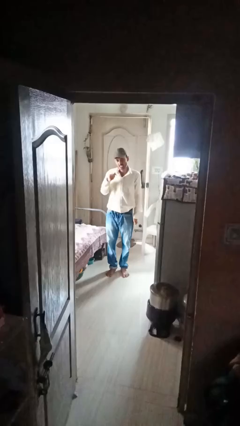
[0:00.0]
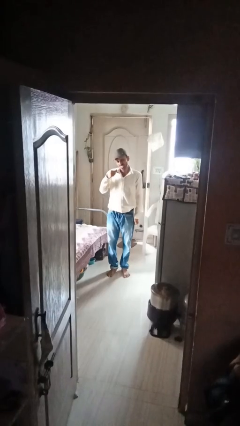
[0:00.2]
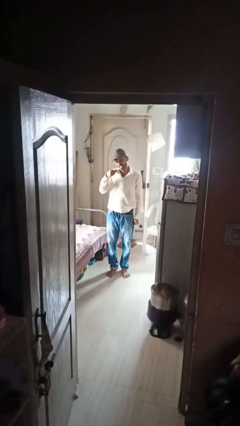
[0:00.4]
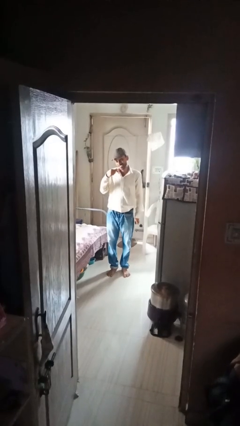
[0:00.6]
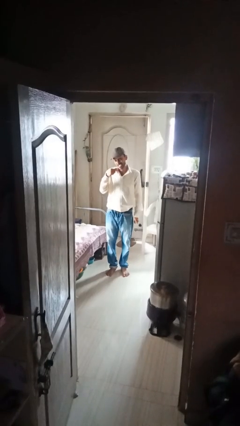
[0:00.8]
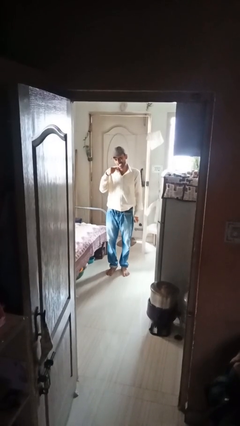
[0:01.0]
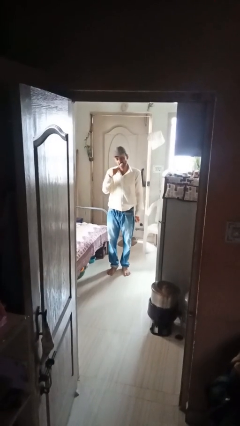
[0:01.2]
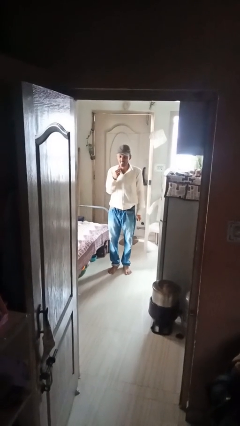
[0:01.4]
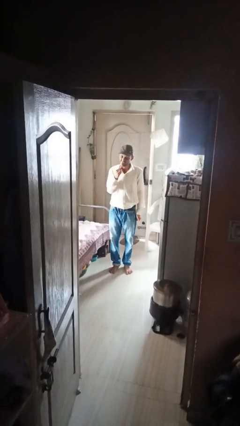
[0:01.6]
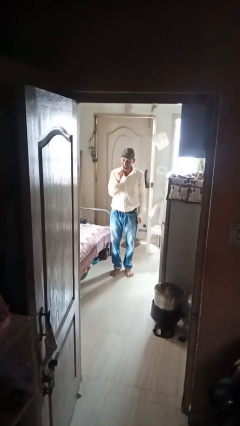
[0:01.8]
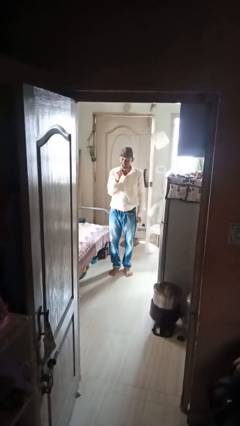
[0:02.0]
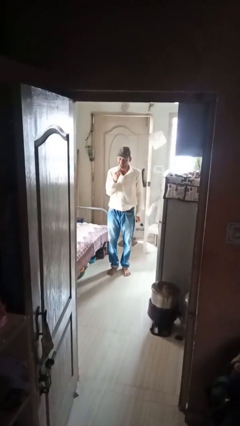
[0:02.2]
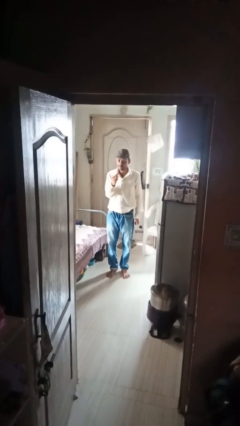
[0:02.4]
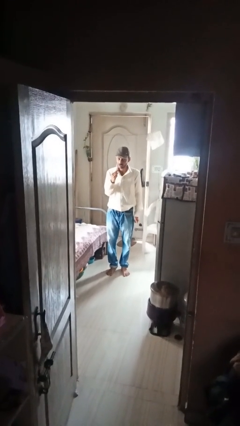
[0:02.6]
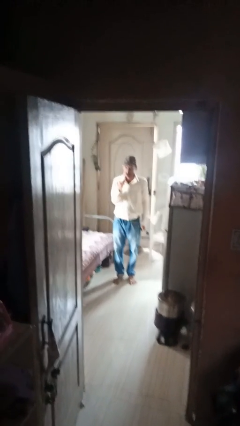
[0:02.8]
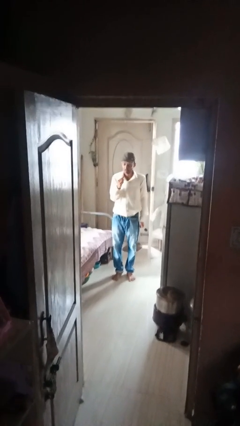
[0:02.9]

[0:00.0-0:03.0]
person brushes teeth

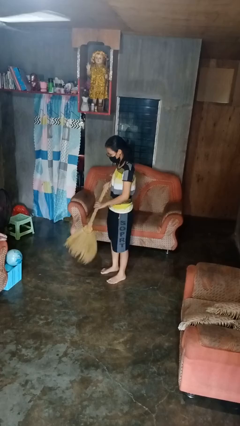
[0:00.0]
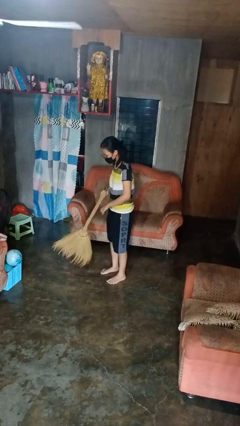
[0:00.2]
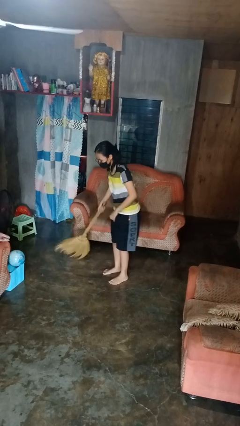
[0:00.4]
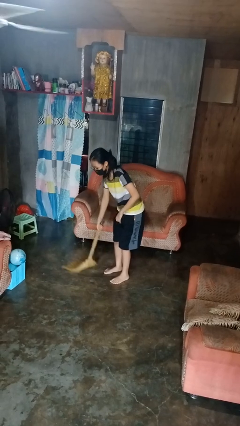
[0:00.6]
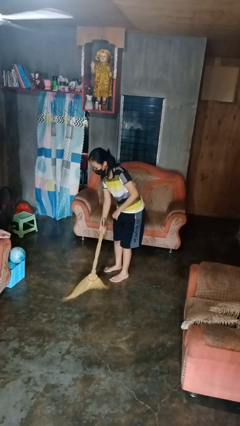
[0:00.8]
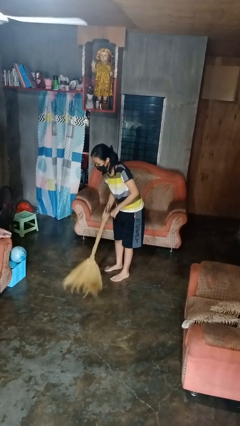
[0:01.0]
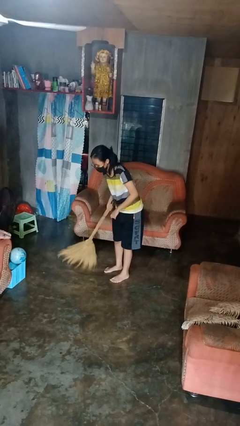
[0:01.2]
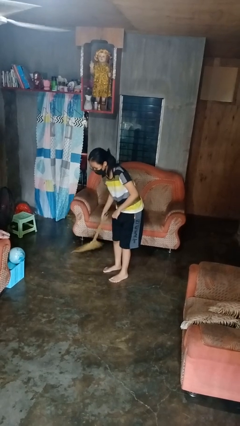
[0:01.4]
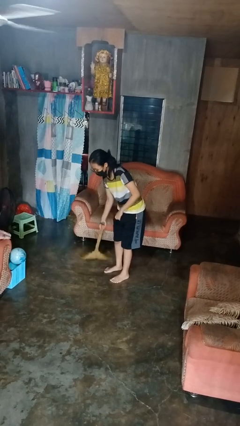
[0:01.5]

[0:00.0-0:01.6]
person sweeps floor

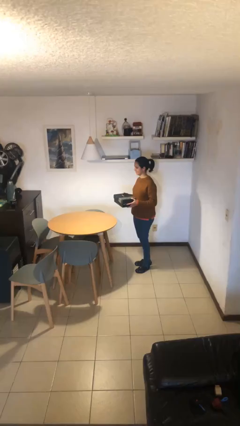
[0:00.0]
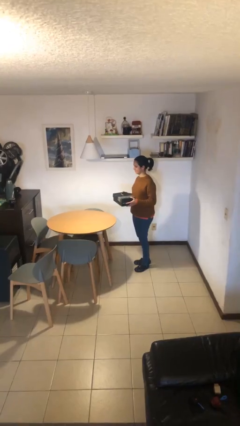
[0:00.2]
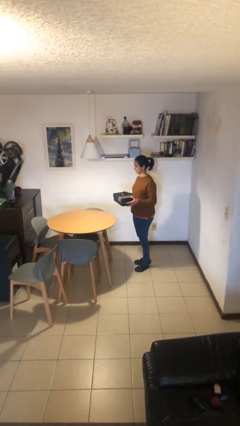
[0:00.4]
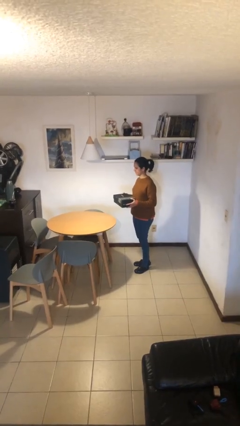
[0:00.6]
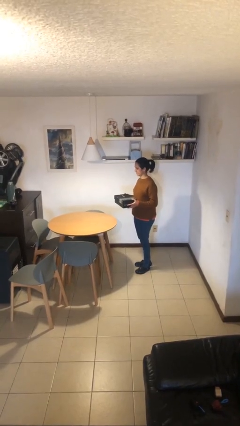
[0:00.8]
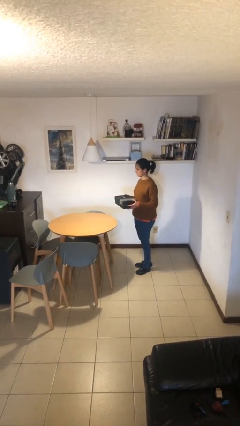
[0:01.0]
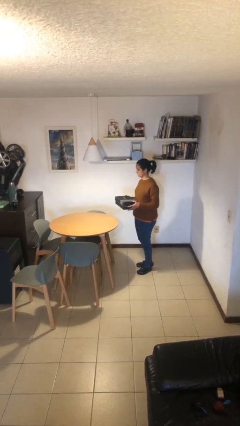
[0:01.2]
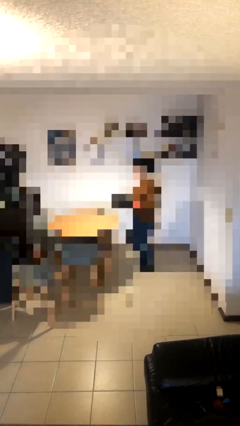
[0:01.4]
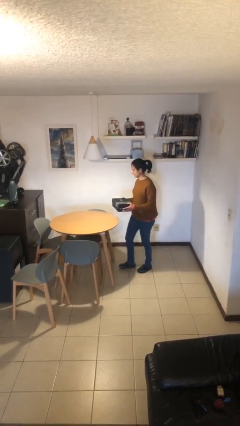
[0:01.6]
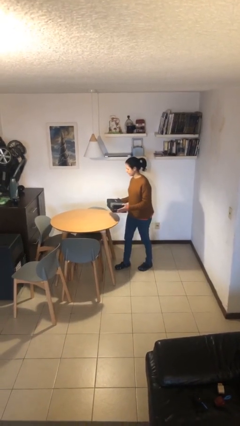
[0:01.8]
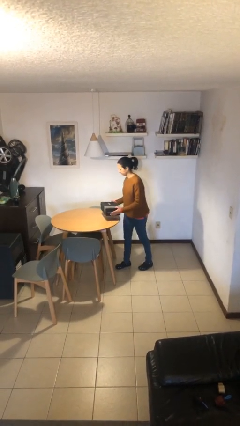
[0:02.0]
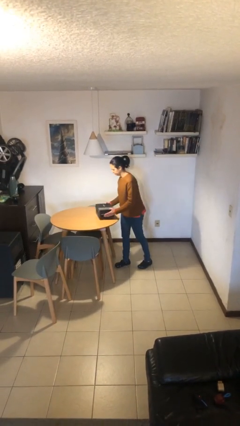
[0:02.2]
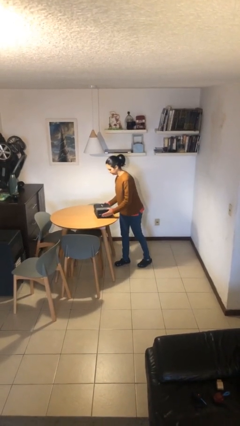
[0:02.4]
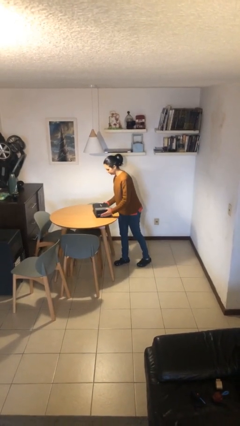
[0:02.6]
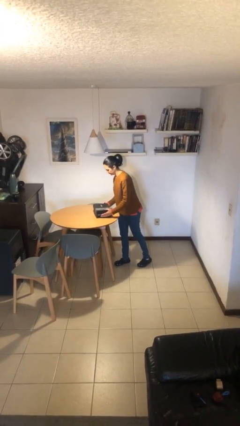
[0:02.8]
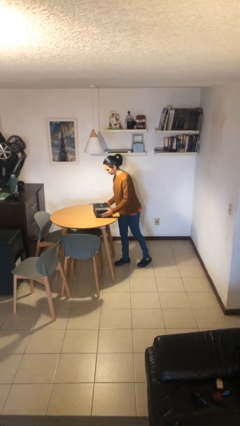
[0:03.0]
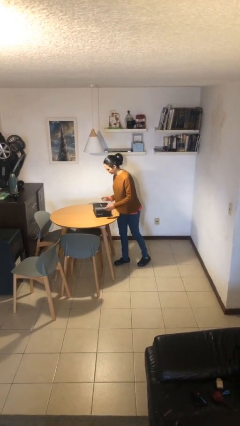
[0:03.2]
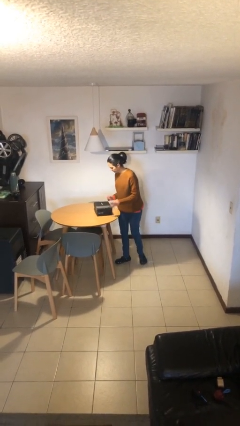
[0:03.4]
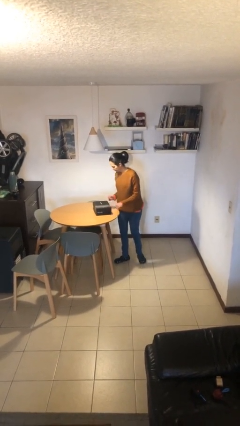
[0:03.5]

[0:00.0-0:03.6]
person puts down object on table

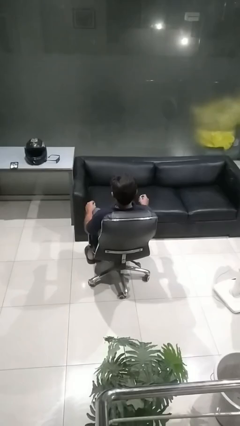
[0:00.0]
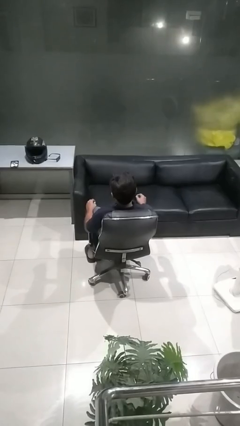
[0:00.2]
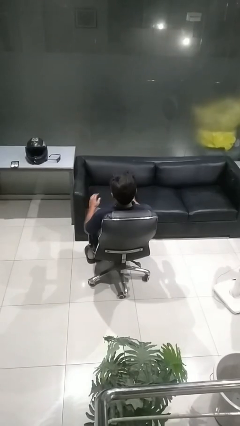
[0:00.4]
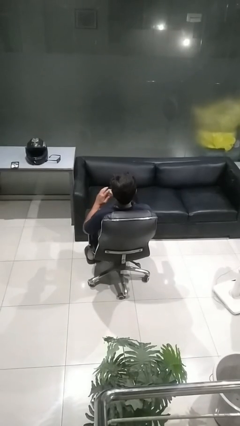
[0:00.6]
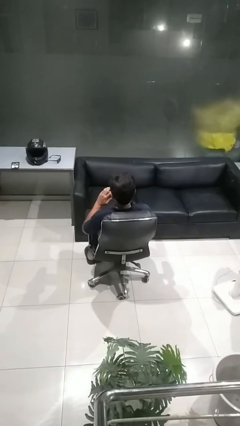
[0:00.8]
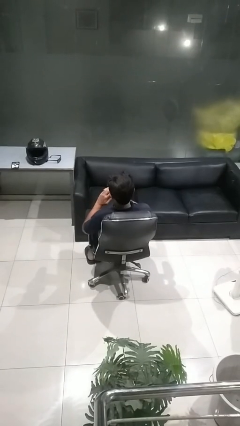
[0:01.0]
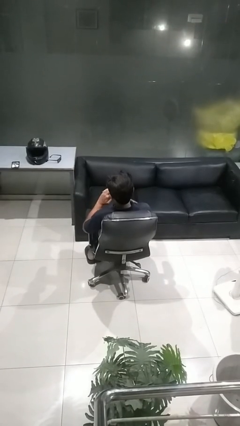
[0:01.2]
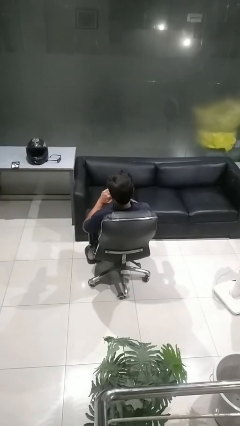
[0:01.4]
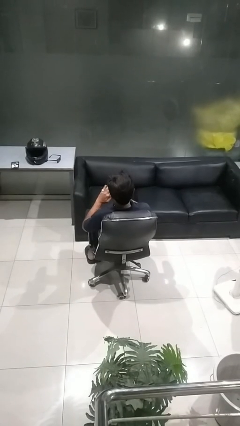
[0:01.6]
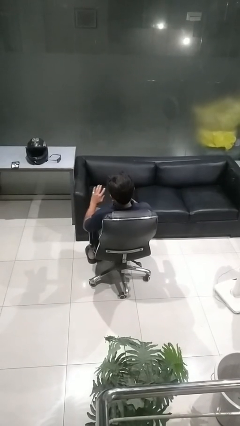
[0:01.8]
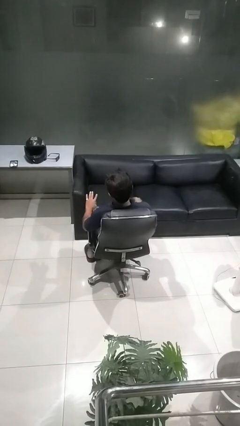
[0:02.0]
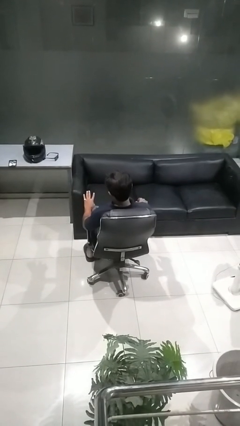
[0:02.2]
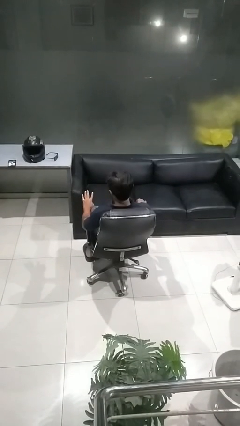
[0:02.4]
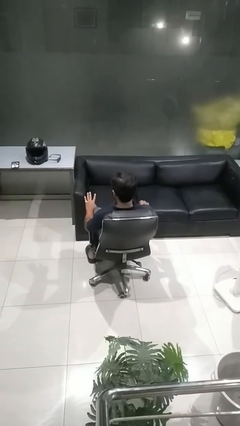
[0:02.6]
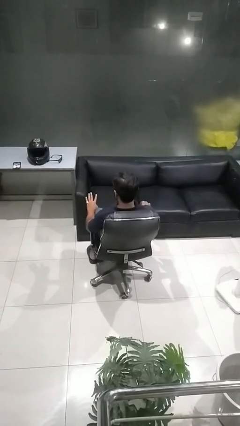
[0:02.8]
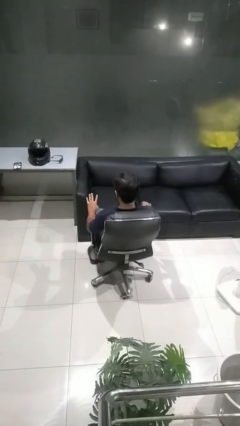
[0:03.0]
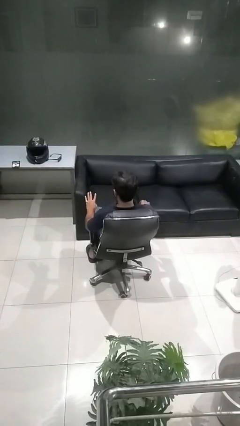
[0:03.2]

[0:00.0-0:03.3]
person puts on ring

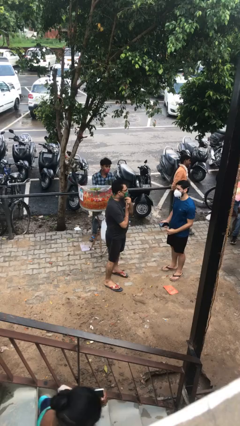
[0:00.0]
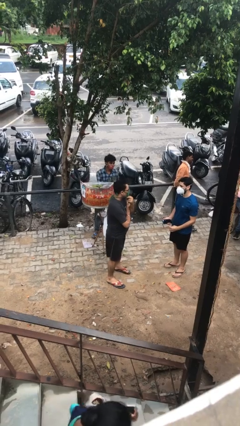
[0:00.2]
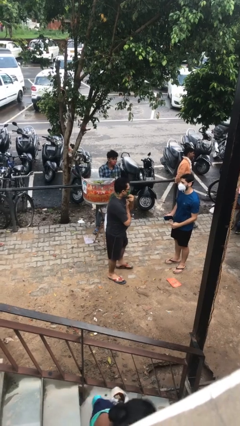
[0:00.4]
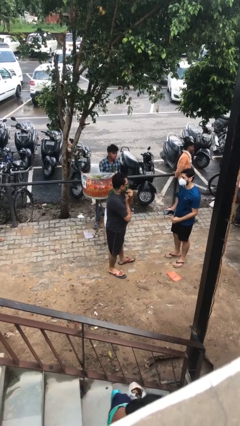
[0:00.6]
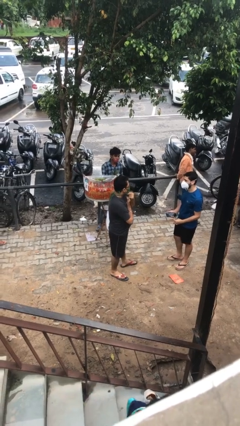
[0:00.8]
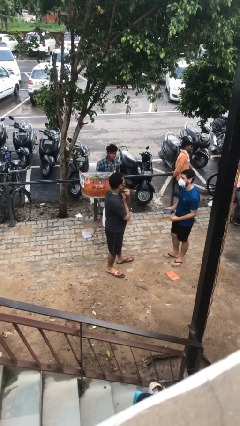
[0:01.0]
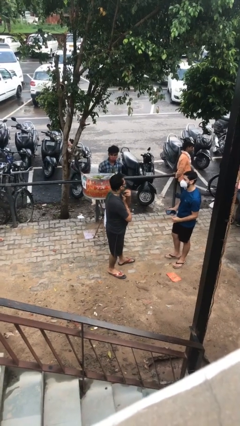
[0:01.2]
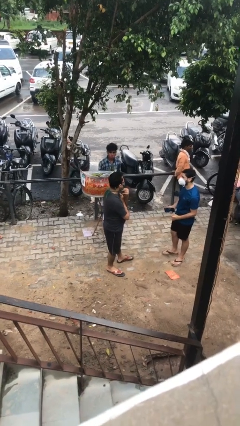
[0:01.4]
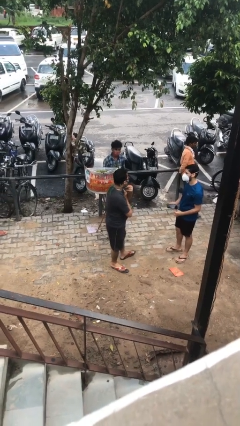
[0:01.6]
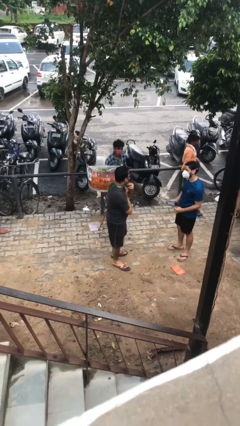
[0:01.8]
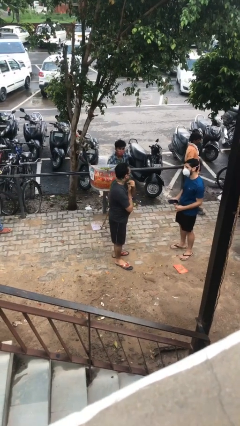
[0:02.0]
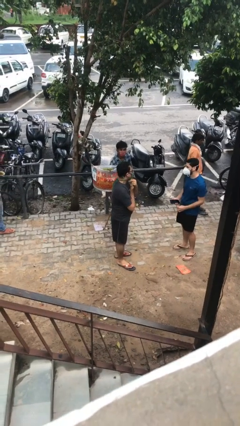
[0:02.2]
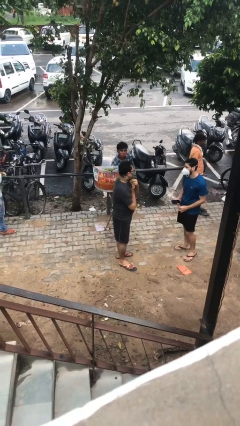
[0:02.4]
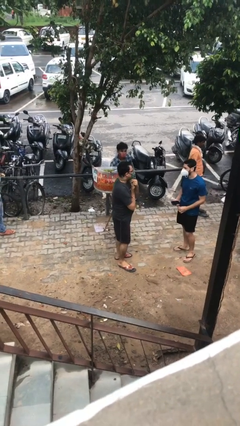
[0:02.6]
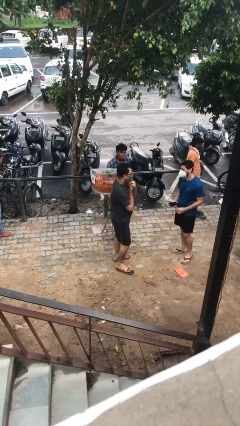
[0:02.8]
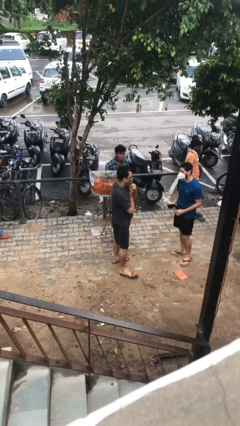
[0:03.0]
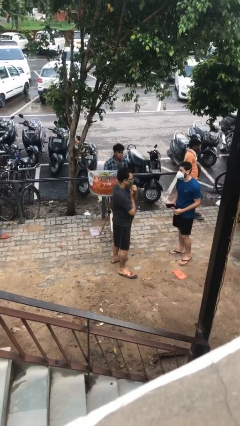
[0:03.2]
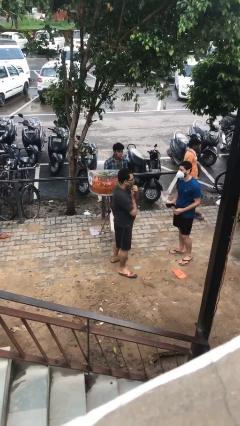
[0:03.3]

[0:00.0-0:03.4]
person talks to person

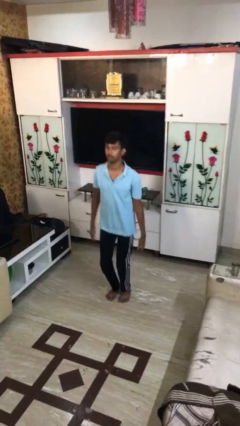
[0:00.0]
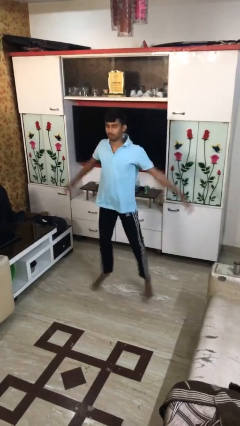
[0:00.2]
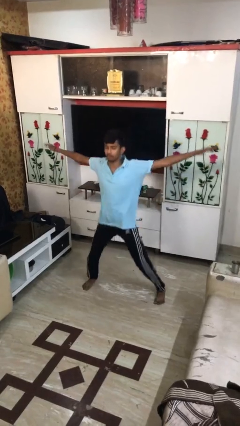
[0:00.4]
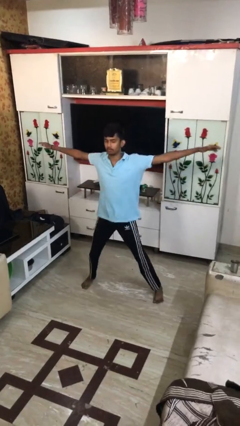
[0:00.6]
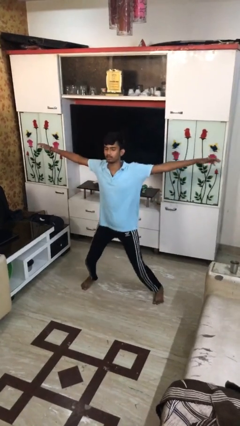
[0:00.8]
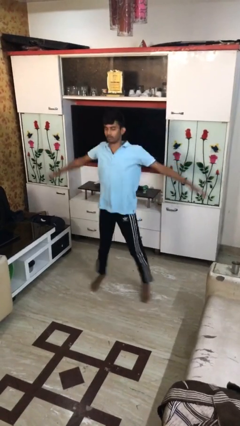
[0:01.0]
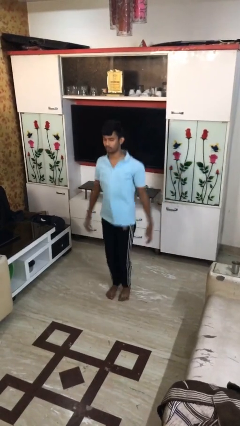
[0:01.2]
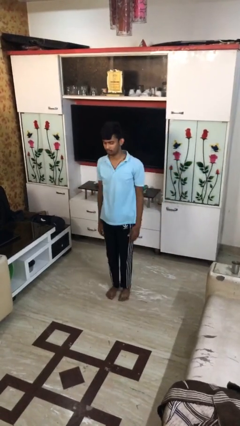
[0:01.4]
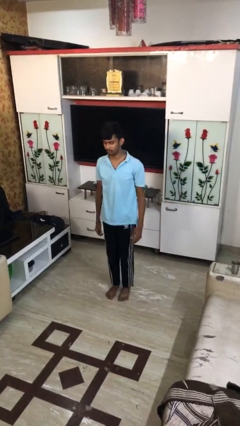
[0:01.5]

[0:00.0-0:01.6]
person exercises with jumping jacks

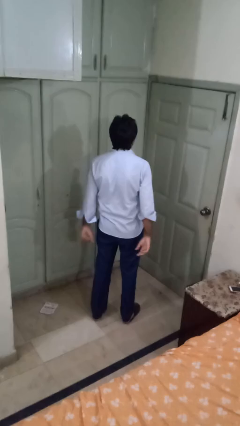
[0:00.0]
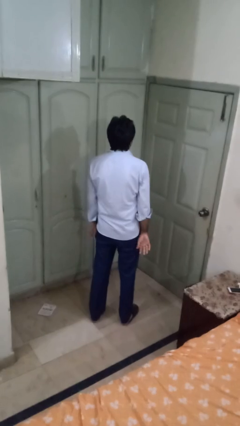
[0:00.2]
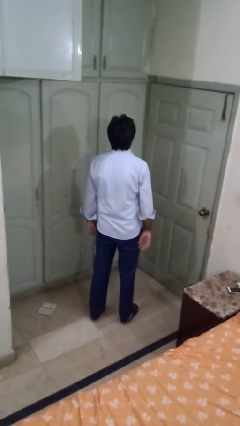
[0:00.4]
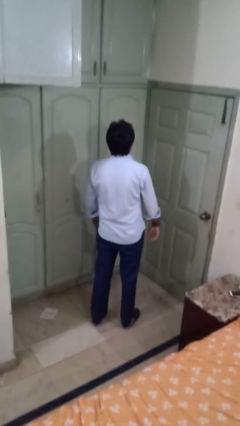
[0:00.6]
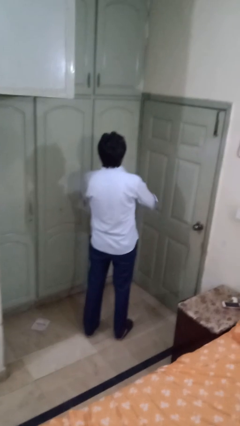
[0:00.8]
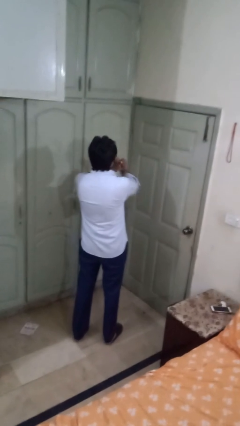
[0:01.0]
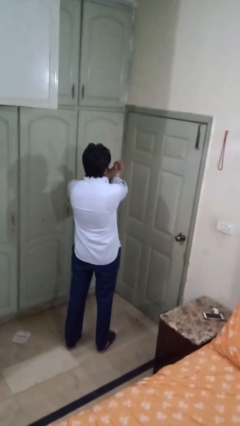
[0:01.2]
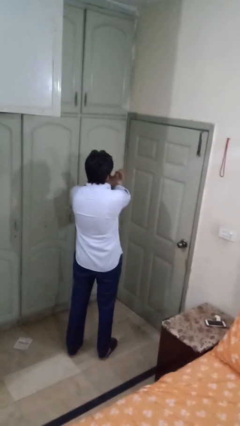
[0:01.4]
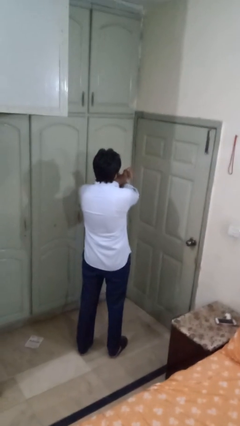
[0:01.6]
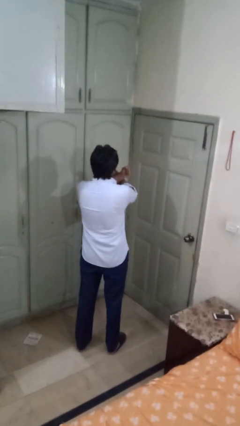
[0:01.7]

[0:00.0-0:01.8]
person gestures arms x
